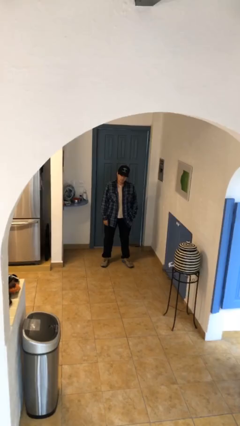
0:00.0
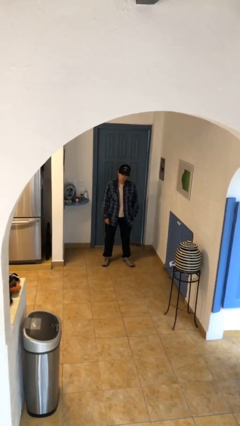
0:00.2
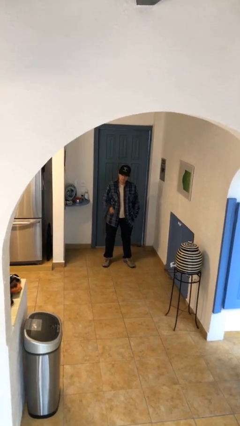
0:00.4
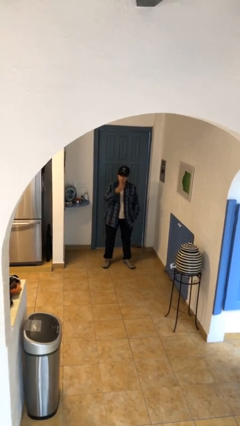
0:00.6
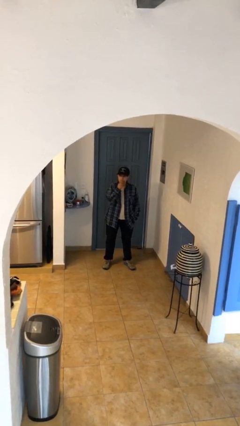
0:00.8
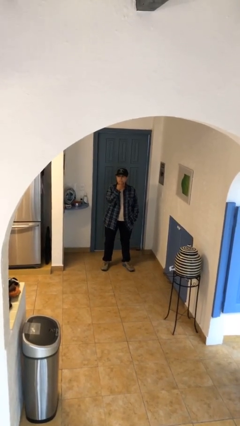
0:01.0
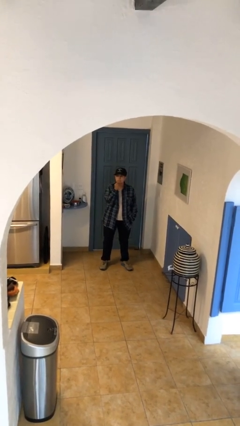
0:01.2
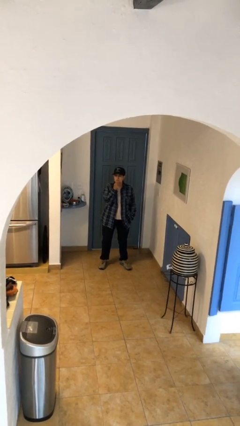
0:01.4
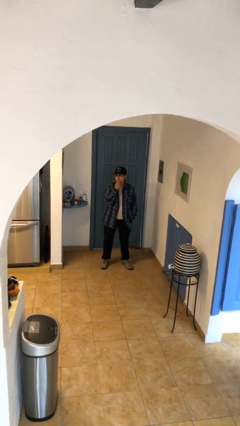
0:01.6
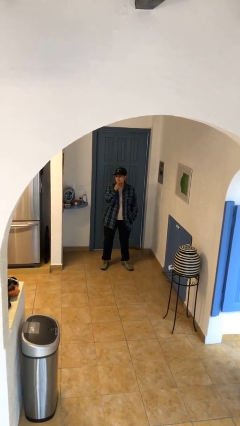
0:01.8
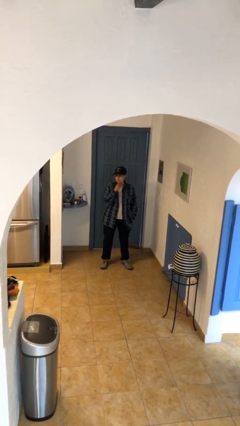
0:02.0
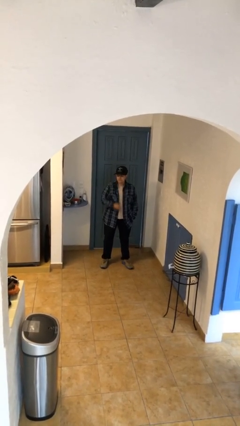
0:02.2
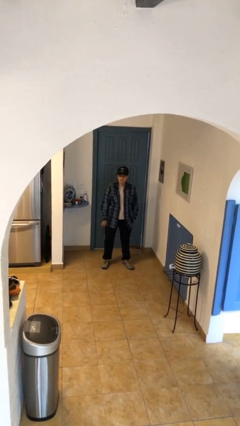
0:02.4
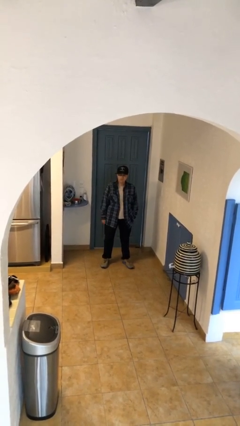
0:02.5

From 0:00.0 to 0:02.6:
person strokes chin

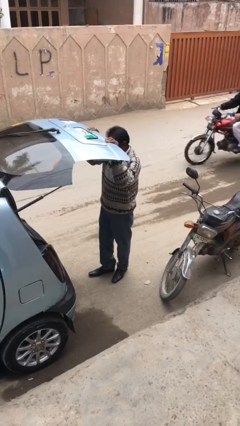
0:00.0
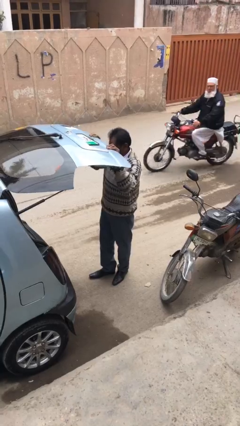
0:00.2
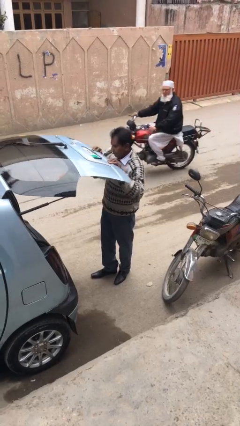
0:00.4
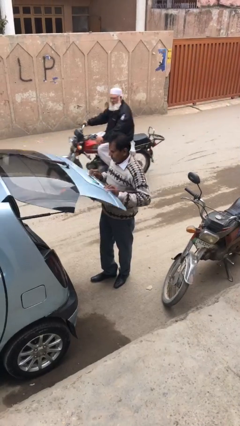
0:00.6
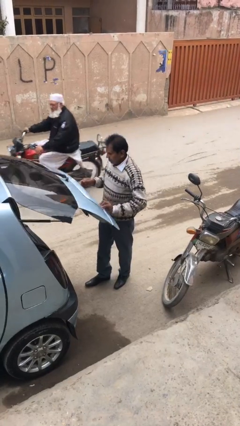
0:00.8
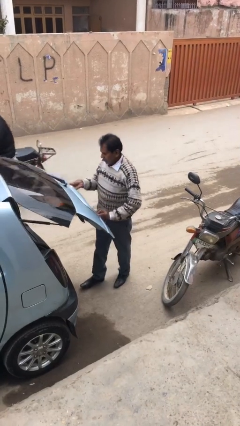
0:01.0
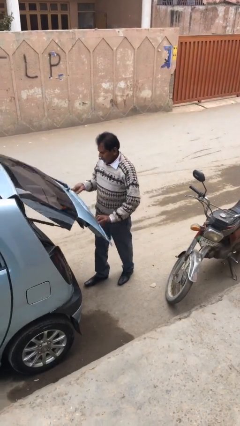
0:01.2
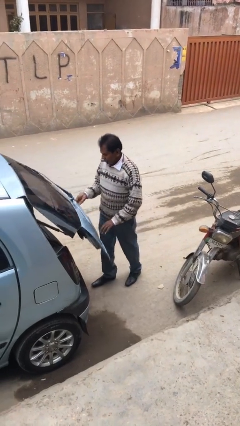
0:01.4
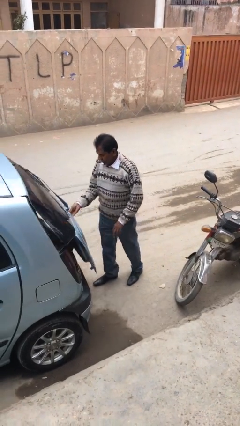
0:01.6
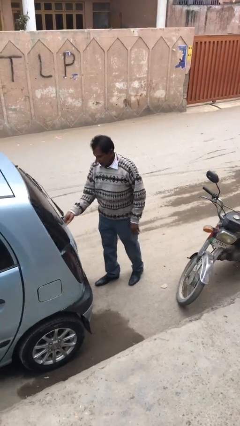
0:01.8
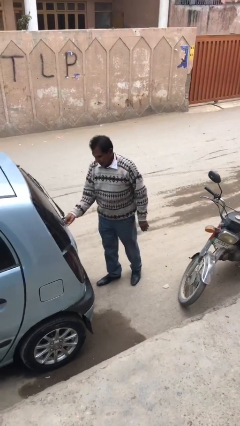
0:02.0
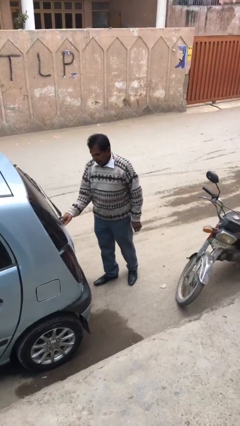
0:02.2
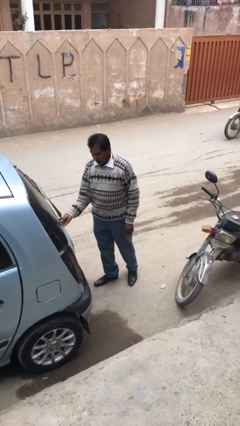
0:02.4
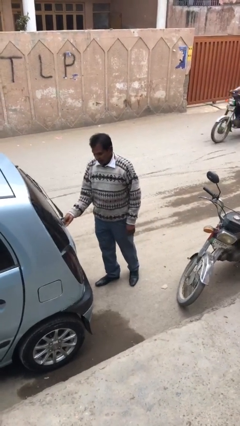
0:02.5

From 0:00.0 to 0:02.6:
person closes car trunk

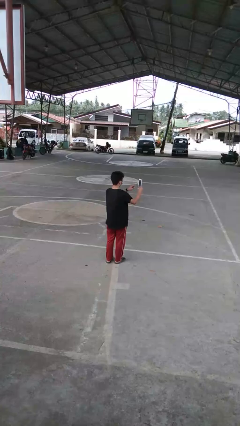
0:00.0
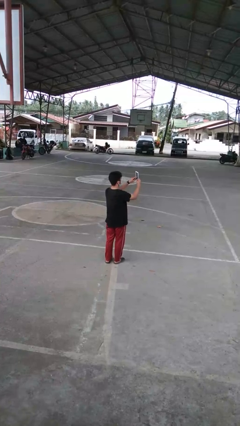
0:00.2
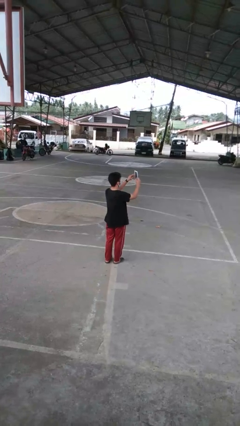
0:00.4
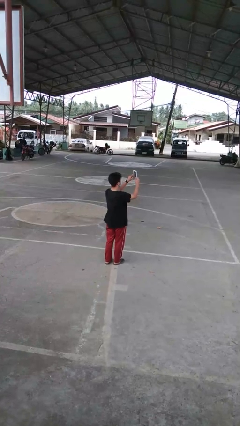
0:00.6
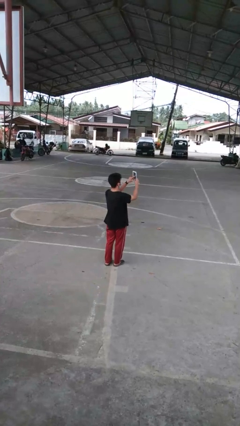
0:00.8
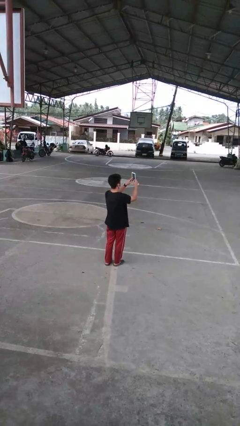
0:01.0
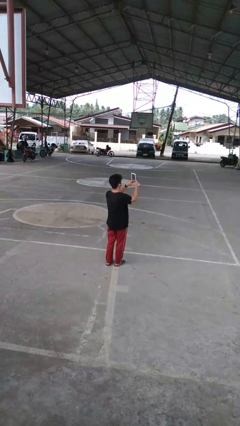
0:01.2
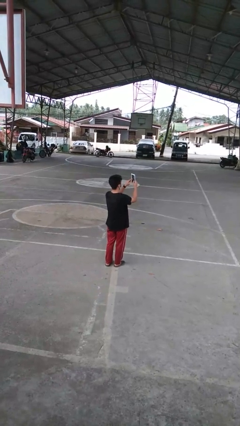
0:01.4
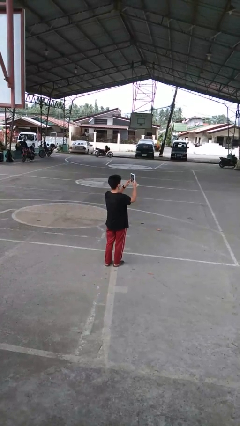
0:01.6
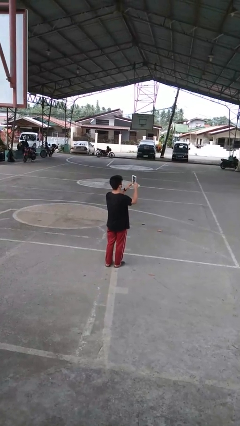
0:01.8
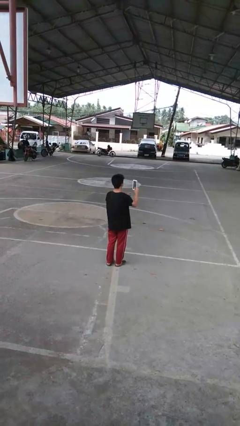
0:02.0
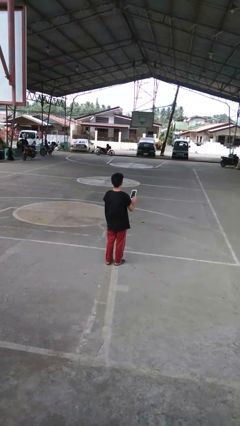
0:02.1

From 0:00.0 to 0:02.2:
person interacts with tablet

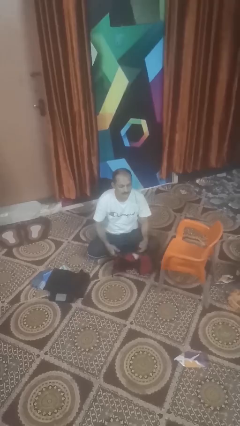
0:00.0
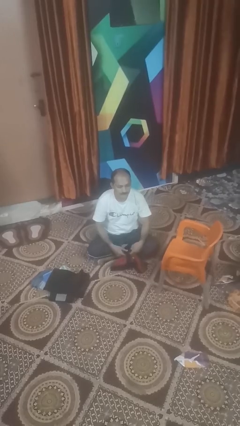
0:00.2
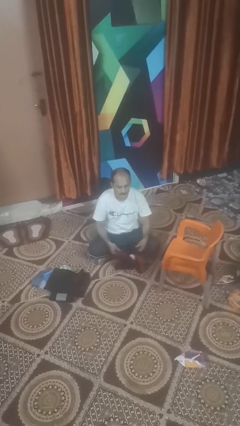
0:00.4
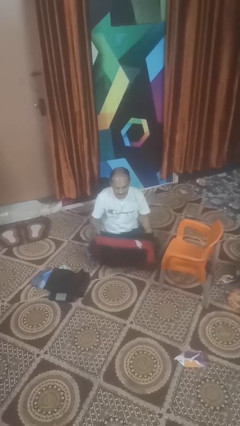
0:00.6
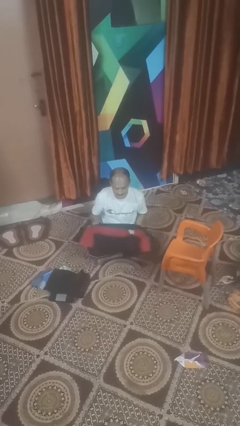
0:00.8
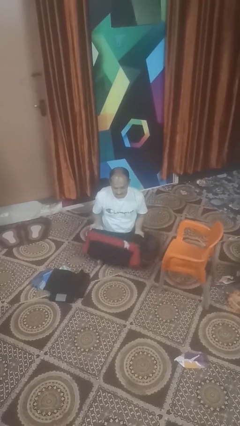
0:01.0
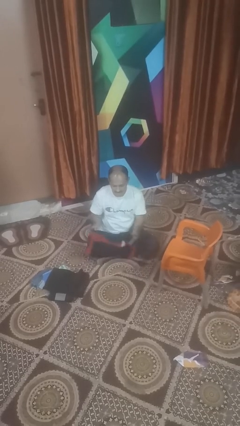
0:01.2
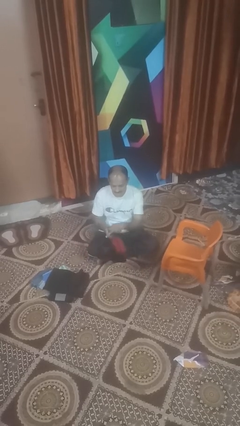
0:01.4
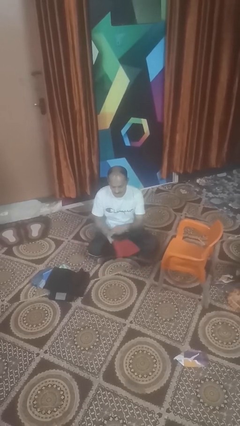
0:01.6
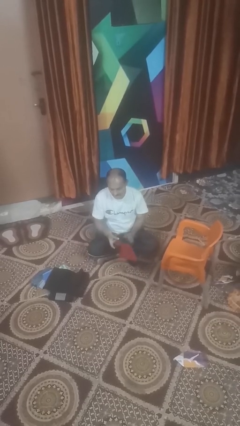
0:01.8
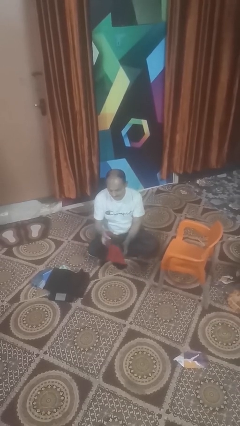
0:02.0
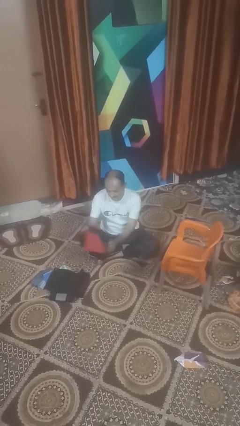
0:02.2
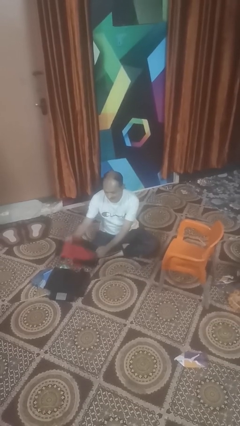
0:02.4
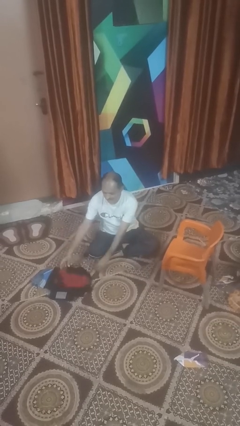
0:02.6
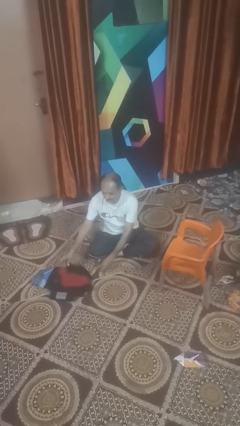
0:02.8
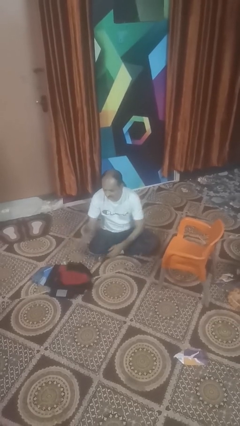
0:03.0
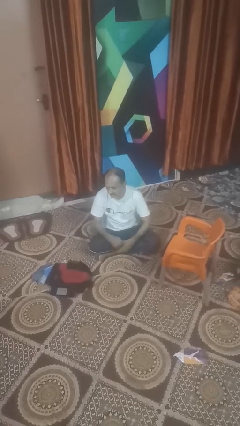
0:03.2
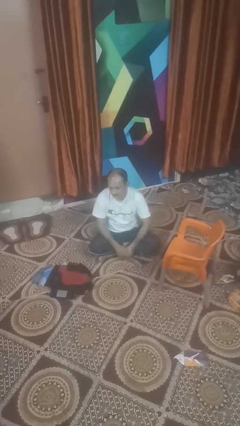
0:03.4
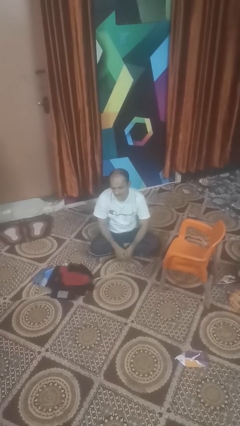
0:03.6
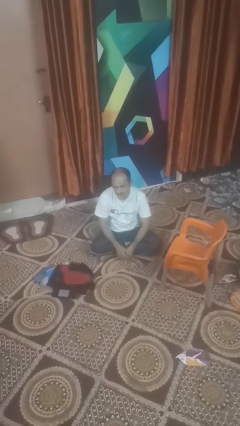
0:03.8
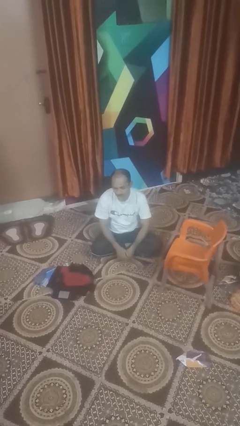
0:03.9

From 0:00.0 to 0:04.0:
person folds shirt

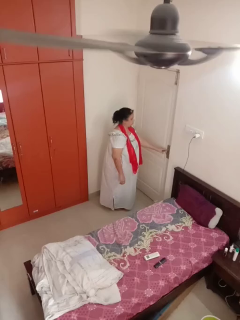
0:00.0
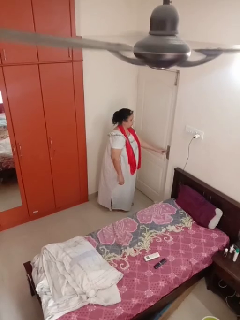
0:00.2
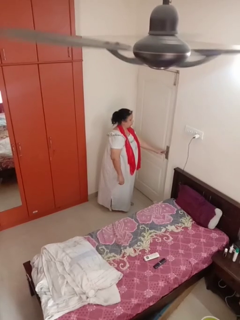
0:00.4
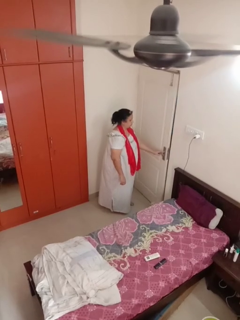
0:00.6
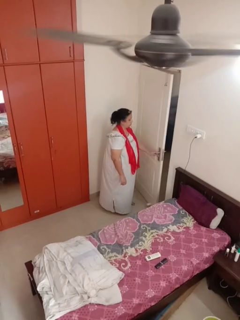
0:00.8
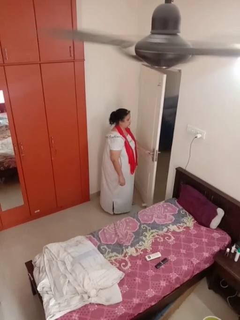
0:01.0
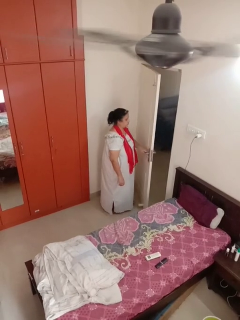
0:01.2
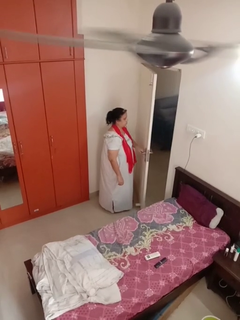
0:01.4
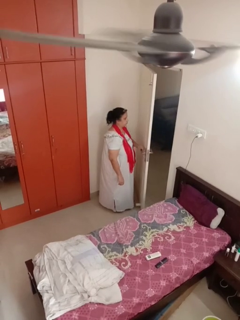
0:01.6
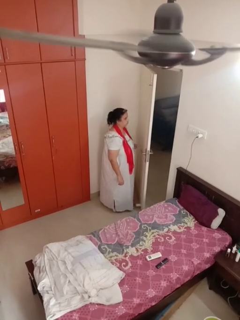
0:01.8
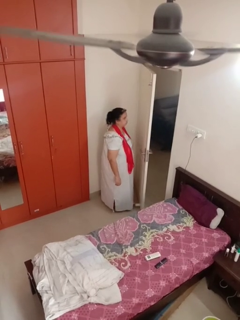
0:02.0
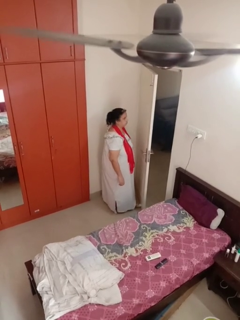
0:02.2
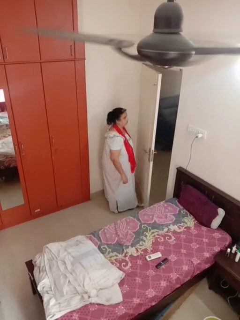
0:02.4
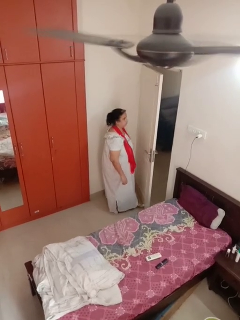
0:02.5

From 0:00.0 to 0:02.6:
person opens facility door

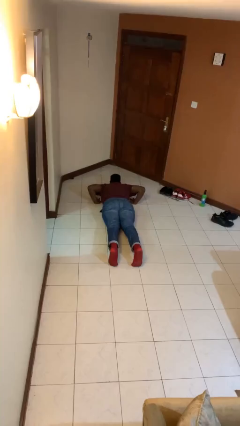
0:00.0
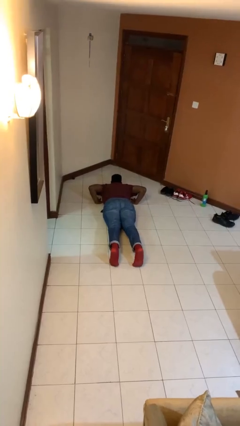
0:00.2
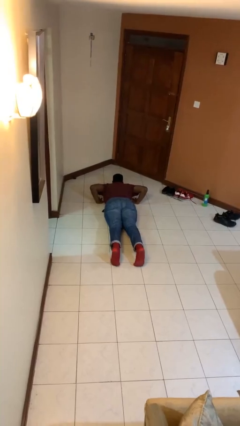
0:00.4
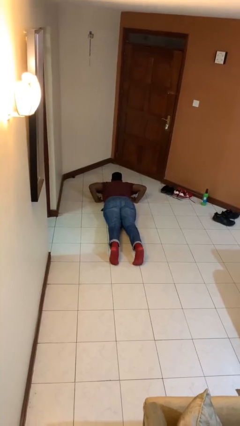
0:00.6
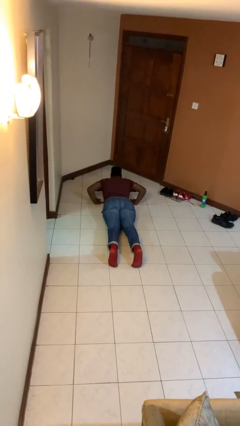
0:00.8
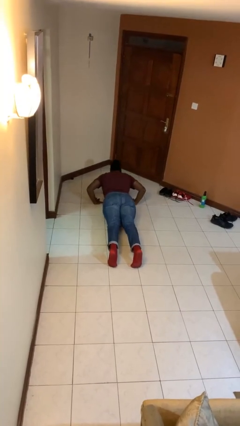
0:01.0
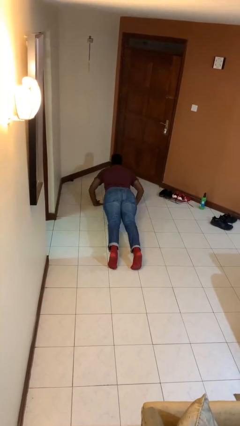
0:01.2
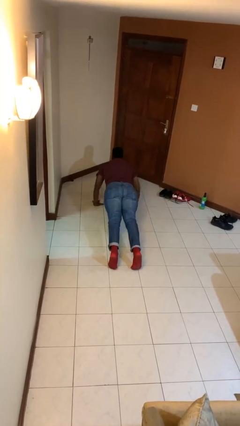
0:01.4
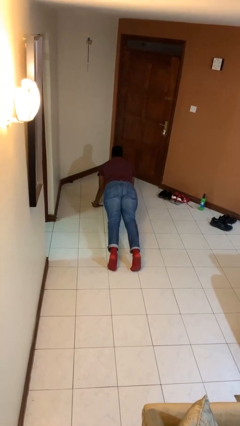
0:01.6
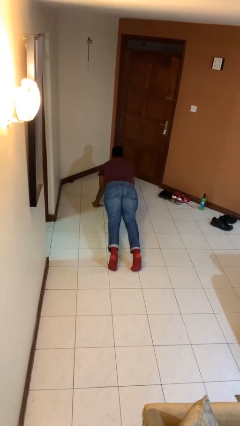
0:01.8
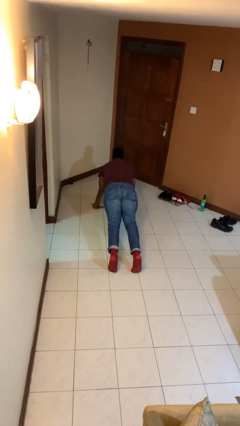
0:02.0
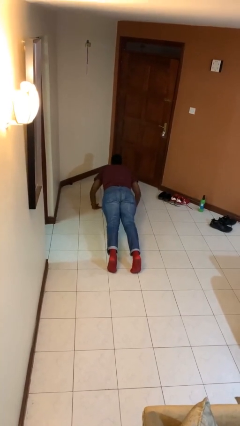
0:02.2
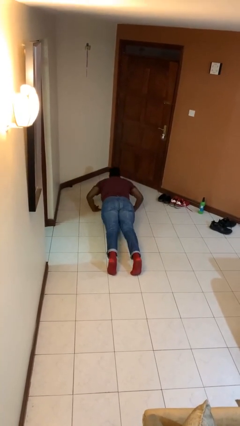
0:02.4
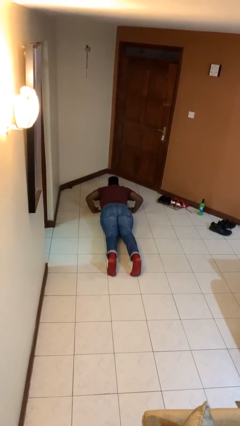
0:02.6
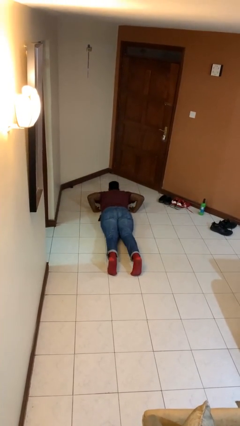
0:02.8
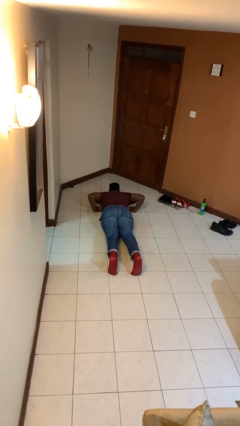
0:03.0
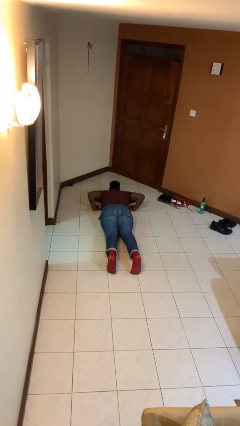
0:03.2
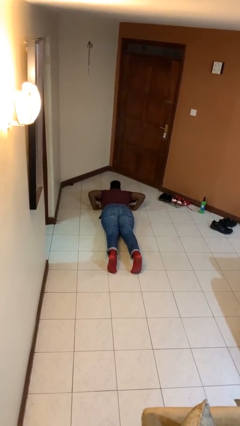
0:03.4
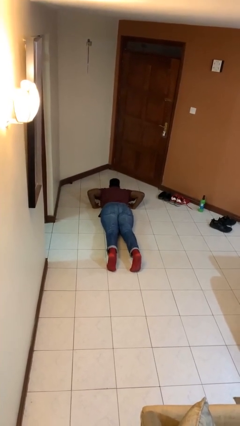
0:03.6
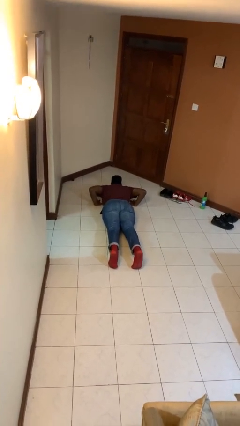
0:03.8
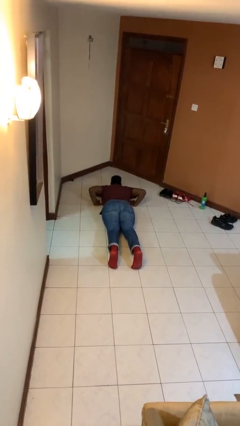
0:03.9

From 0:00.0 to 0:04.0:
person exercises with pushup
